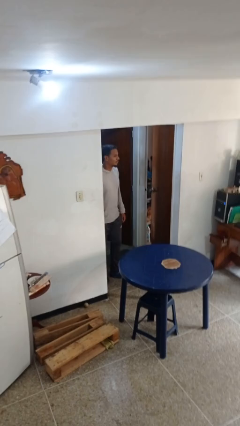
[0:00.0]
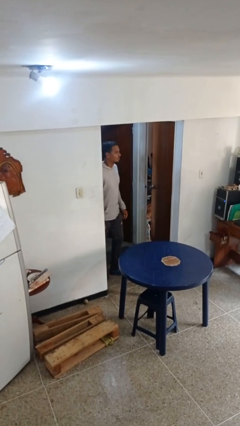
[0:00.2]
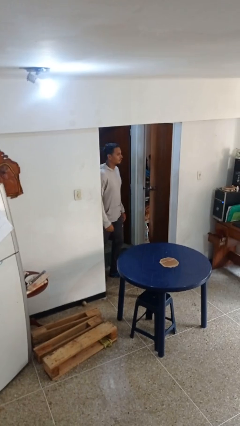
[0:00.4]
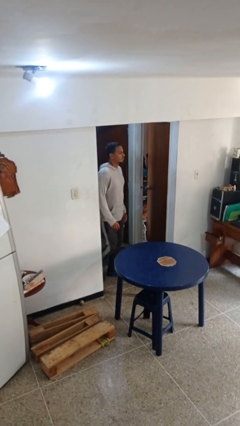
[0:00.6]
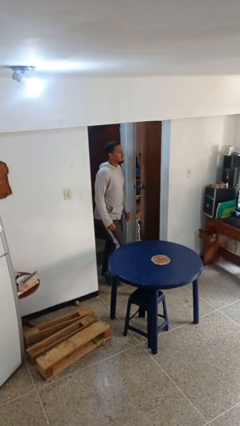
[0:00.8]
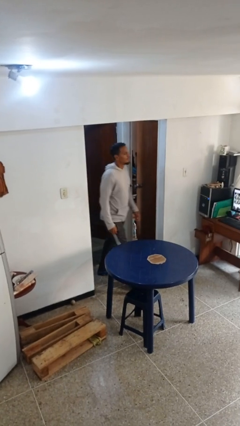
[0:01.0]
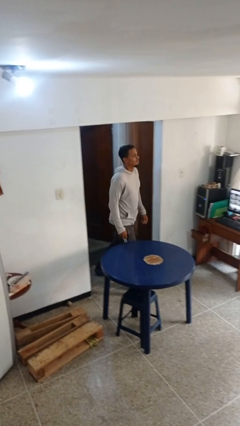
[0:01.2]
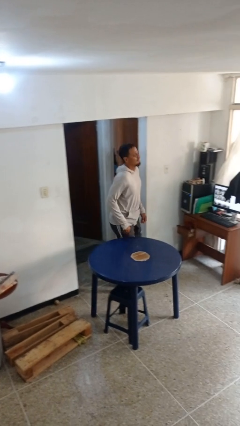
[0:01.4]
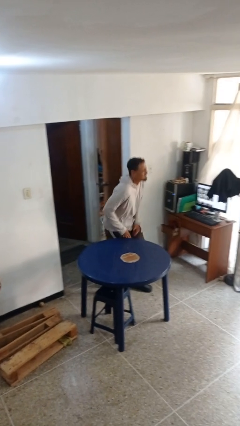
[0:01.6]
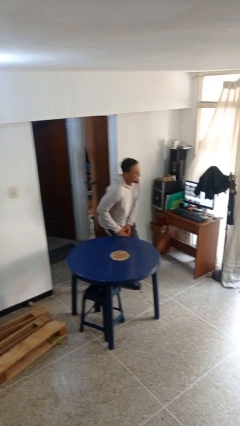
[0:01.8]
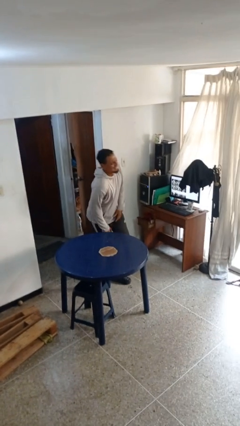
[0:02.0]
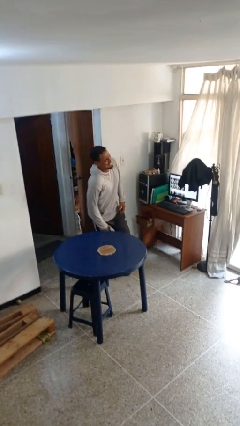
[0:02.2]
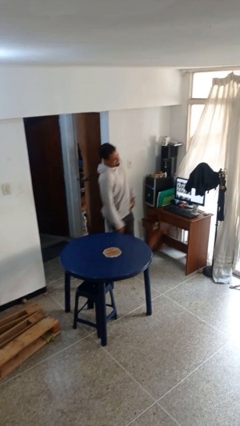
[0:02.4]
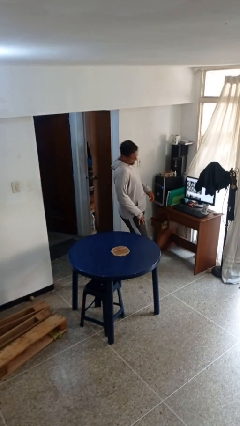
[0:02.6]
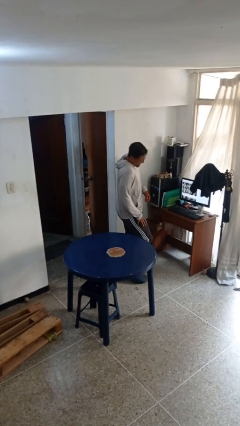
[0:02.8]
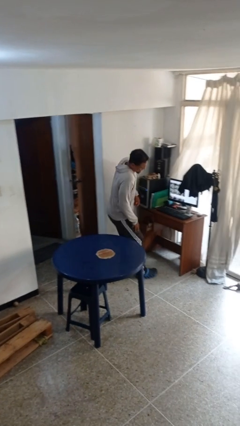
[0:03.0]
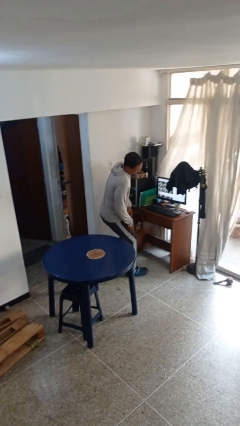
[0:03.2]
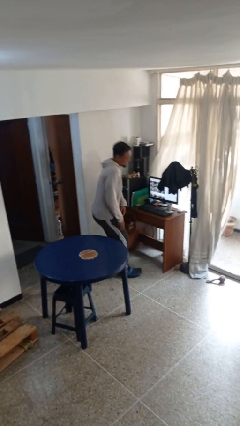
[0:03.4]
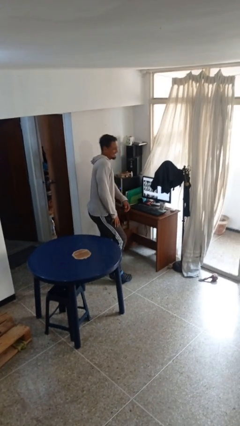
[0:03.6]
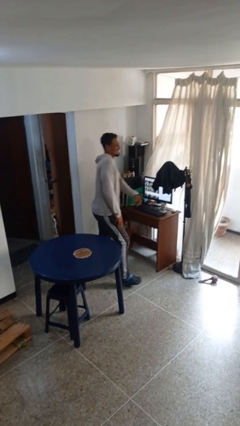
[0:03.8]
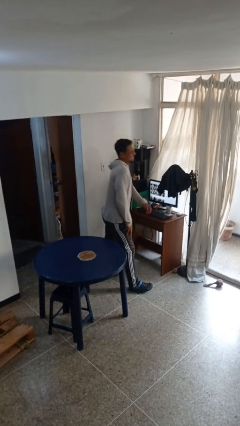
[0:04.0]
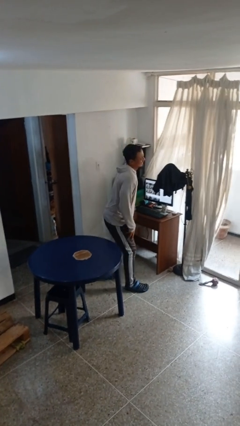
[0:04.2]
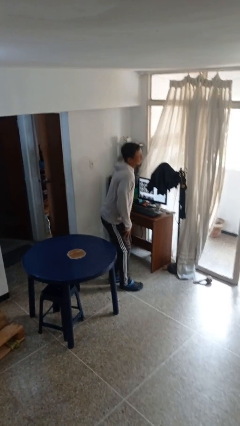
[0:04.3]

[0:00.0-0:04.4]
person bumps into table

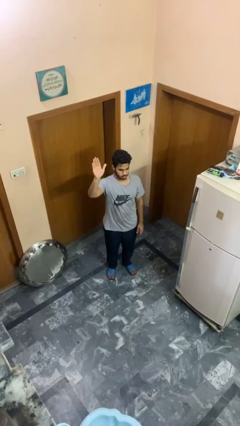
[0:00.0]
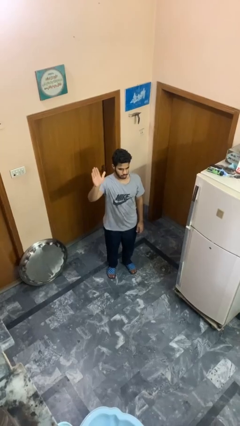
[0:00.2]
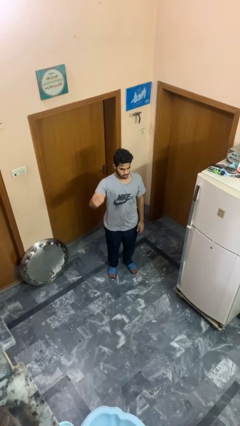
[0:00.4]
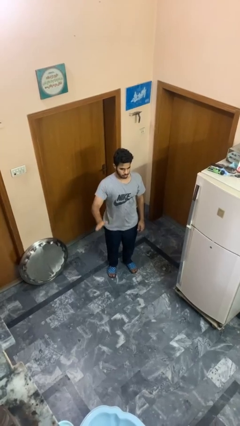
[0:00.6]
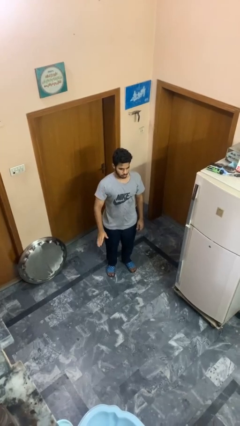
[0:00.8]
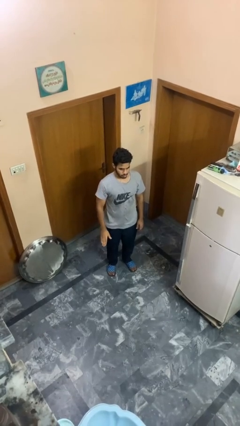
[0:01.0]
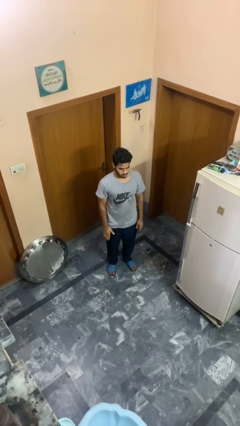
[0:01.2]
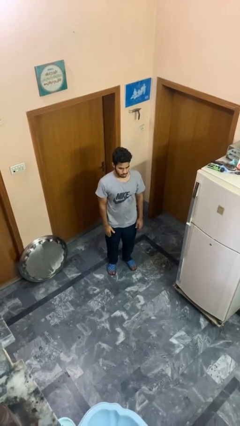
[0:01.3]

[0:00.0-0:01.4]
person gestures lower hand

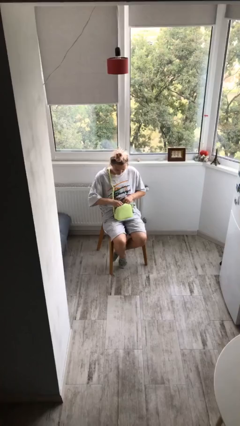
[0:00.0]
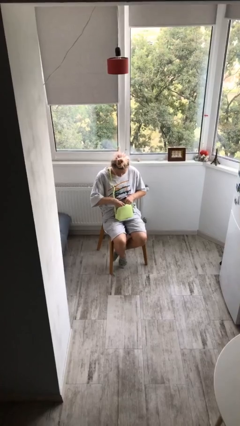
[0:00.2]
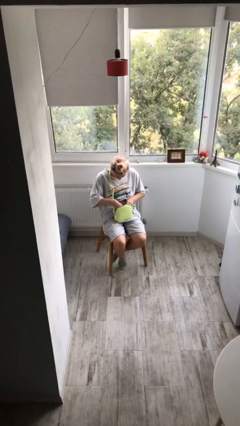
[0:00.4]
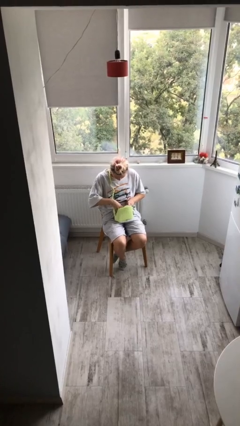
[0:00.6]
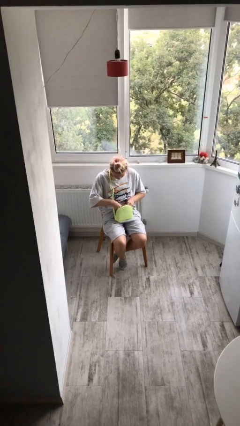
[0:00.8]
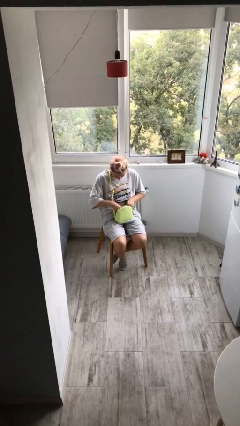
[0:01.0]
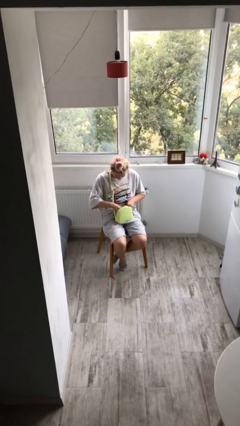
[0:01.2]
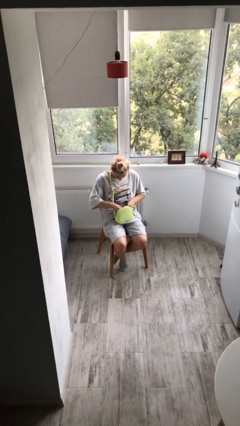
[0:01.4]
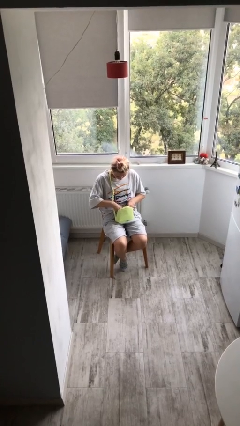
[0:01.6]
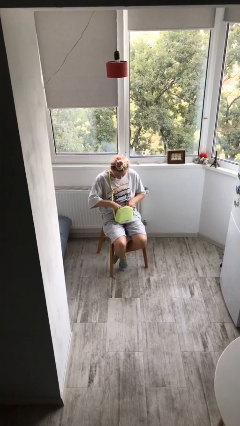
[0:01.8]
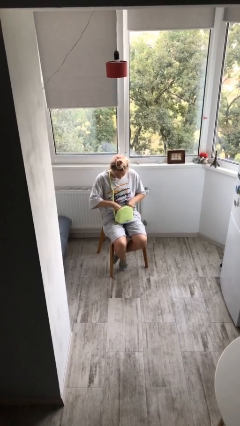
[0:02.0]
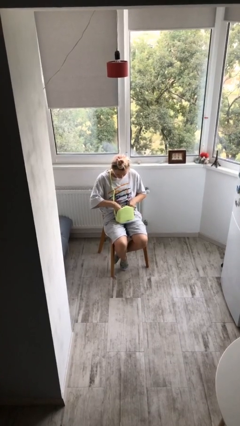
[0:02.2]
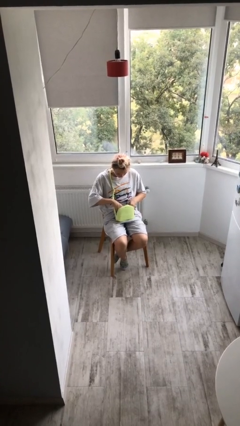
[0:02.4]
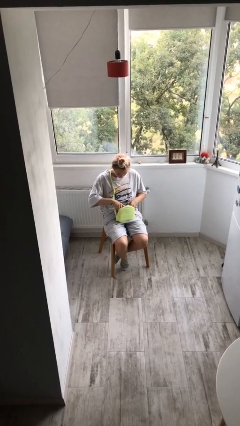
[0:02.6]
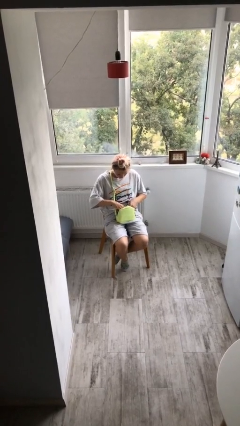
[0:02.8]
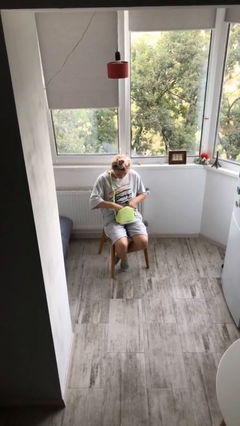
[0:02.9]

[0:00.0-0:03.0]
person searches in purse

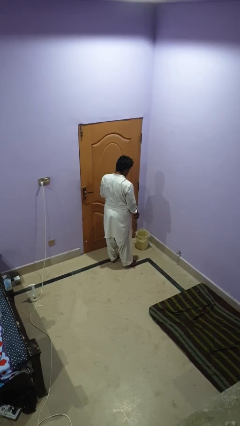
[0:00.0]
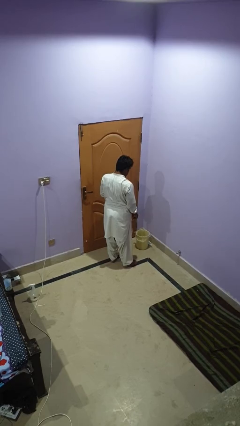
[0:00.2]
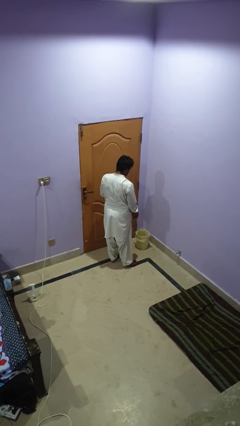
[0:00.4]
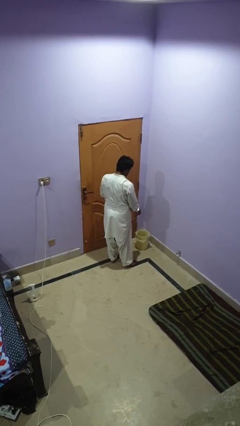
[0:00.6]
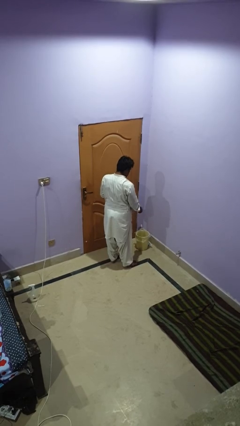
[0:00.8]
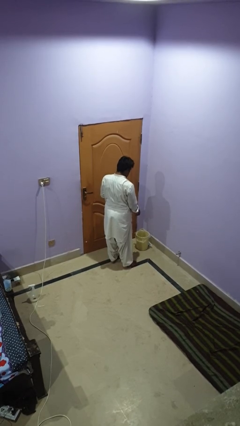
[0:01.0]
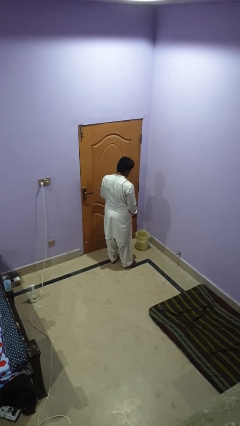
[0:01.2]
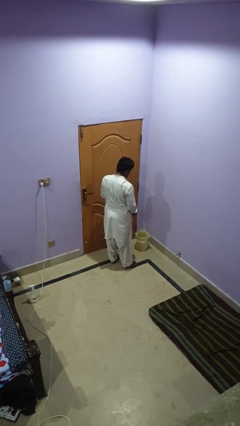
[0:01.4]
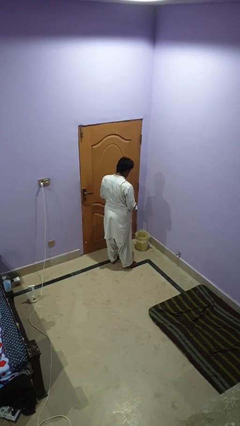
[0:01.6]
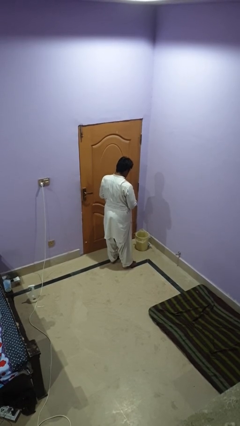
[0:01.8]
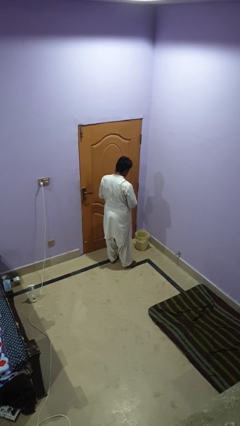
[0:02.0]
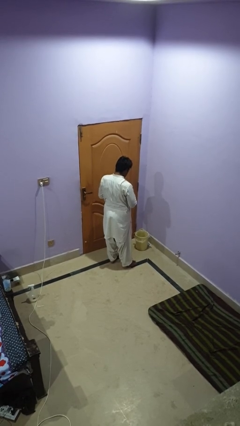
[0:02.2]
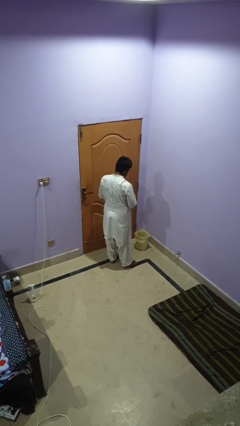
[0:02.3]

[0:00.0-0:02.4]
person discards trash

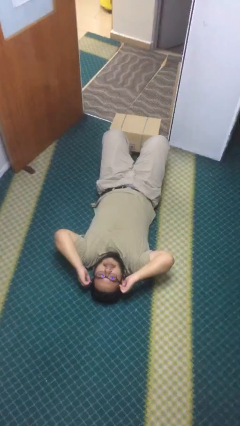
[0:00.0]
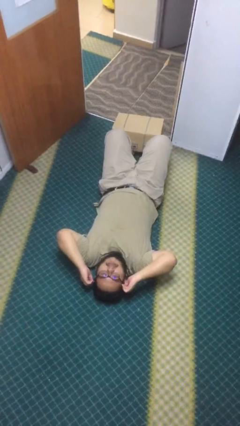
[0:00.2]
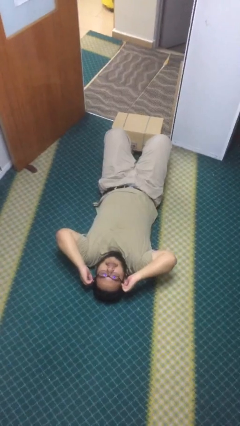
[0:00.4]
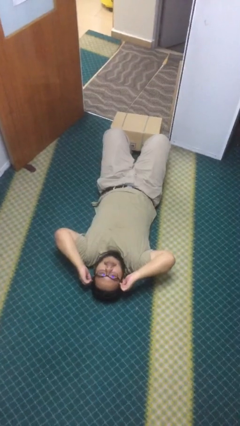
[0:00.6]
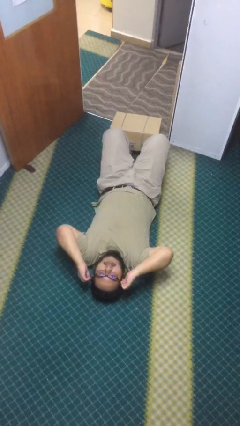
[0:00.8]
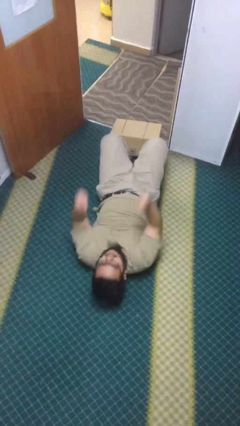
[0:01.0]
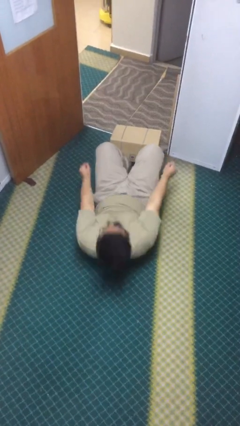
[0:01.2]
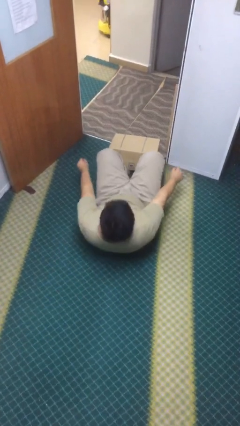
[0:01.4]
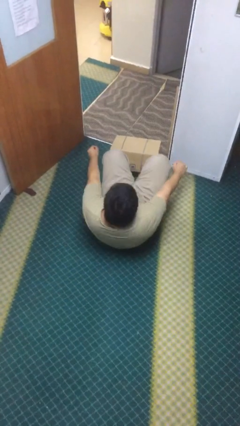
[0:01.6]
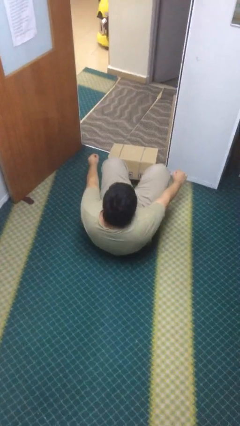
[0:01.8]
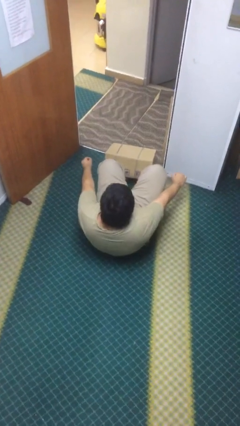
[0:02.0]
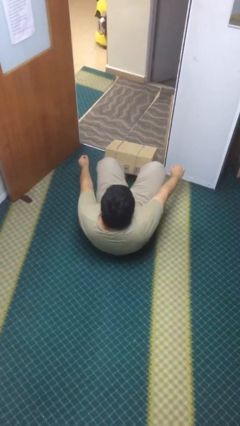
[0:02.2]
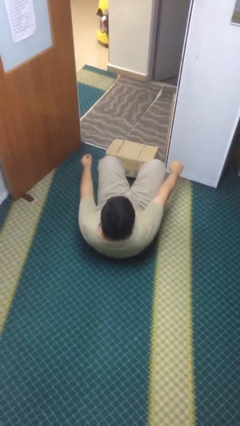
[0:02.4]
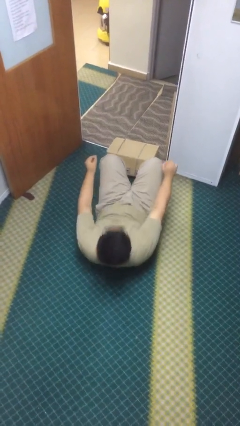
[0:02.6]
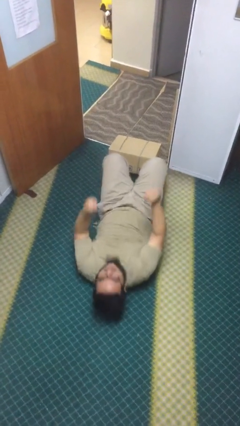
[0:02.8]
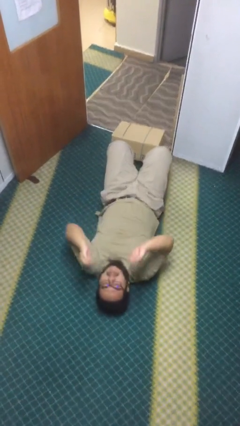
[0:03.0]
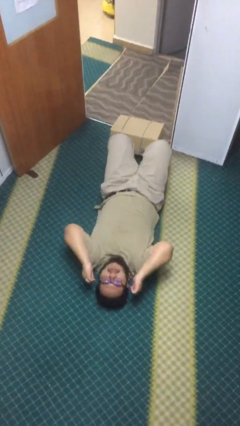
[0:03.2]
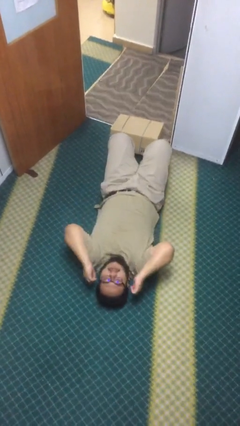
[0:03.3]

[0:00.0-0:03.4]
person exercises with situp

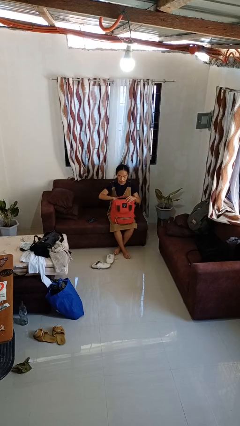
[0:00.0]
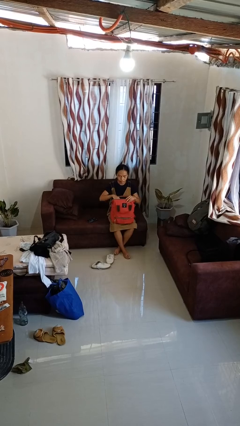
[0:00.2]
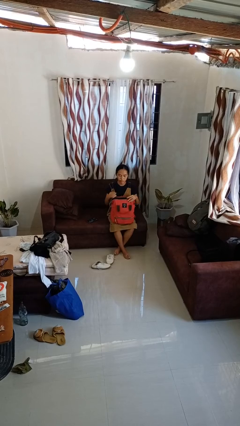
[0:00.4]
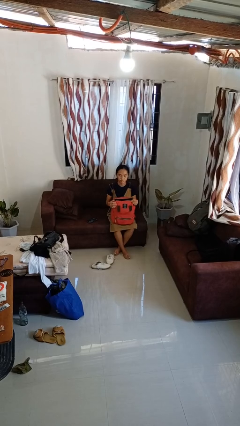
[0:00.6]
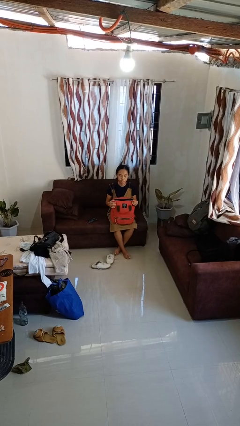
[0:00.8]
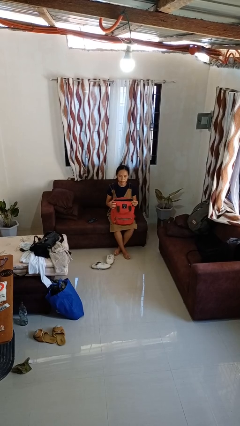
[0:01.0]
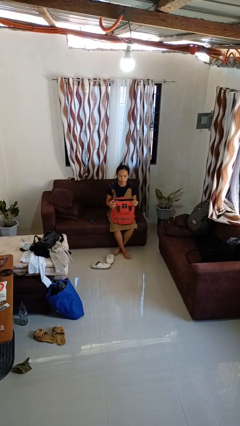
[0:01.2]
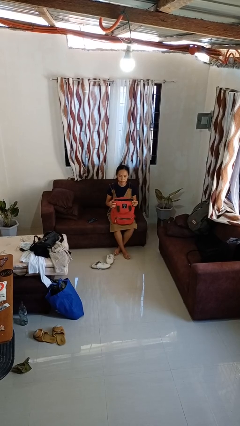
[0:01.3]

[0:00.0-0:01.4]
person puts object into backpack

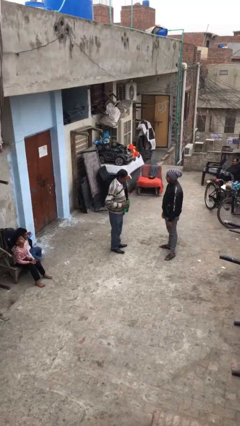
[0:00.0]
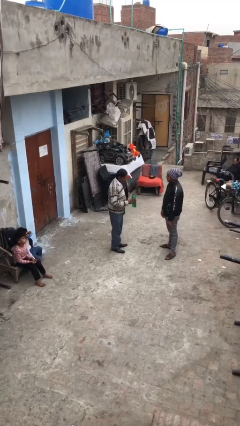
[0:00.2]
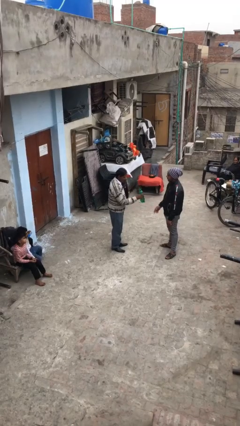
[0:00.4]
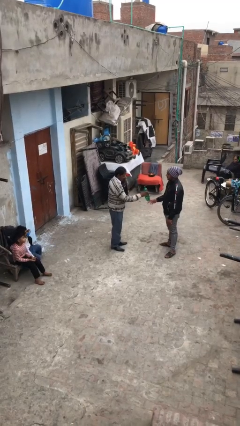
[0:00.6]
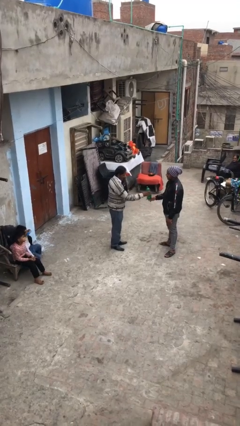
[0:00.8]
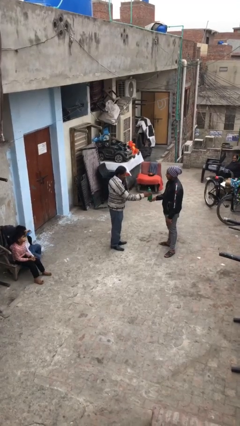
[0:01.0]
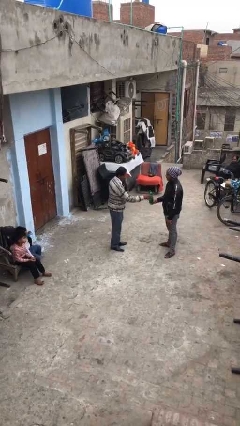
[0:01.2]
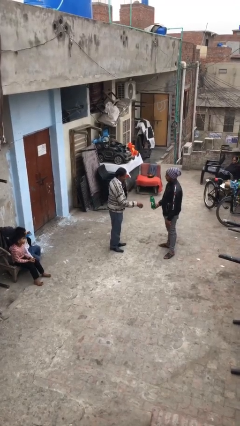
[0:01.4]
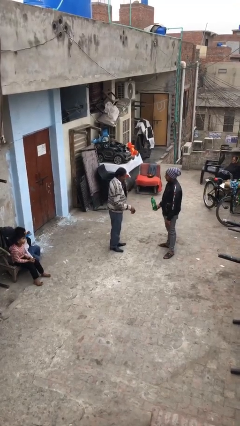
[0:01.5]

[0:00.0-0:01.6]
person transfers object to person
